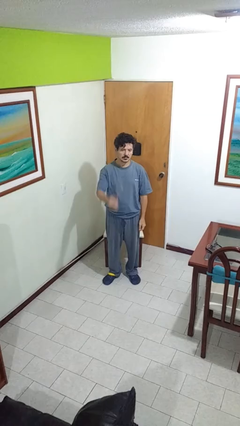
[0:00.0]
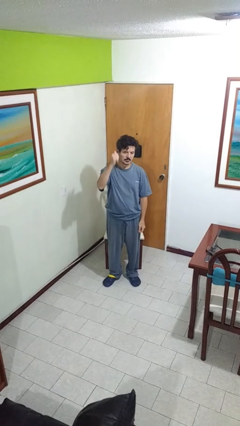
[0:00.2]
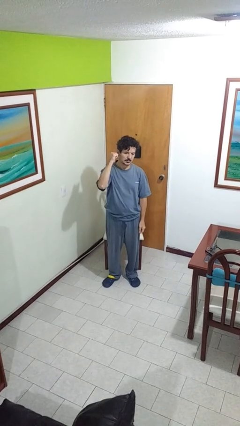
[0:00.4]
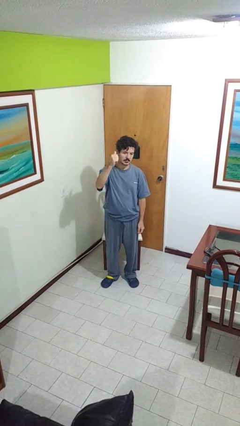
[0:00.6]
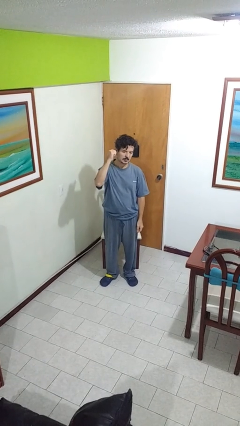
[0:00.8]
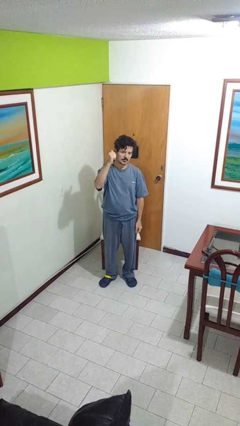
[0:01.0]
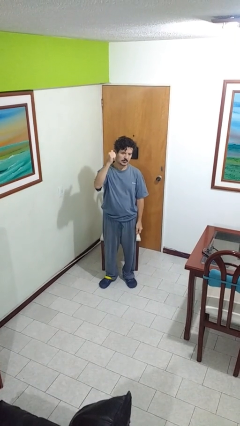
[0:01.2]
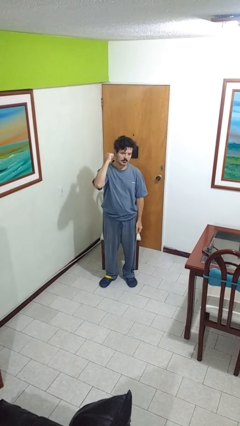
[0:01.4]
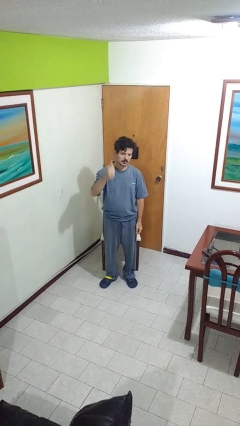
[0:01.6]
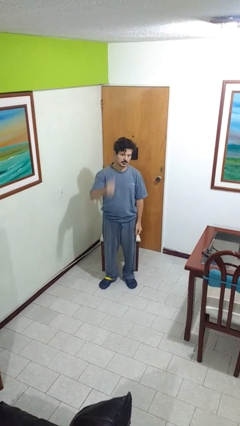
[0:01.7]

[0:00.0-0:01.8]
person gestures behind me

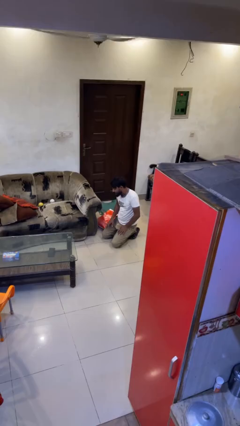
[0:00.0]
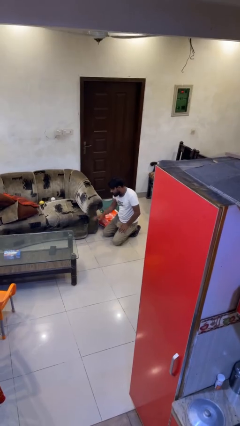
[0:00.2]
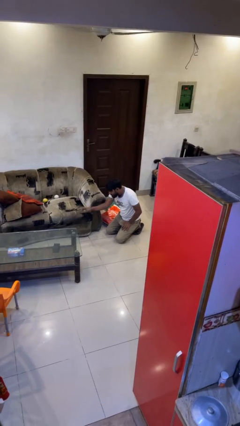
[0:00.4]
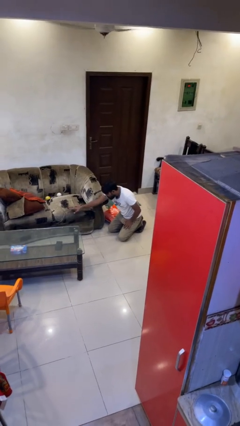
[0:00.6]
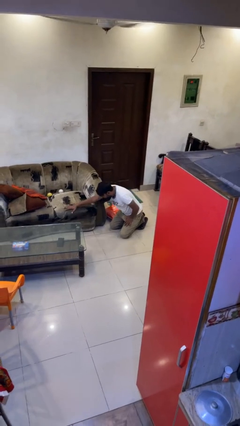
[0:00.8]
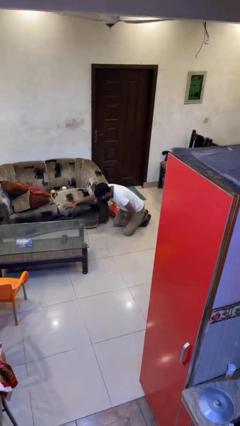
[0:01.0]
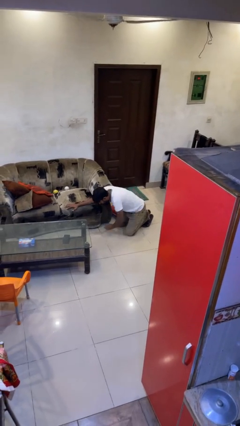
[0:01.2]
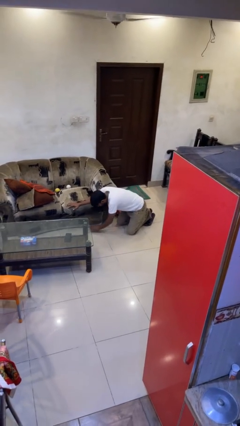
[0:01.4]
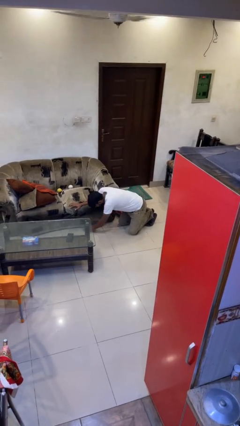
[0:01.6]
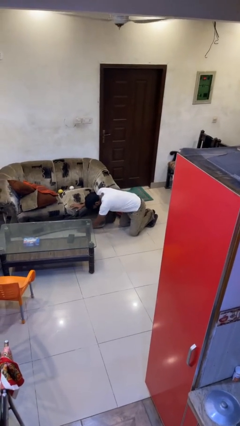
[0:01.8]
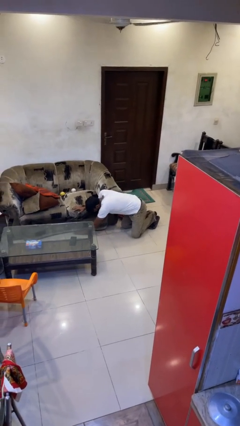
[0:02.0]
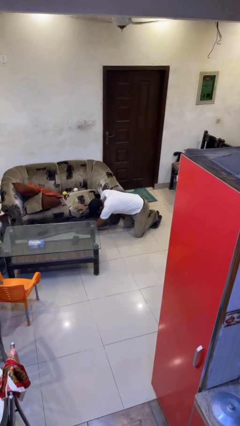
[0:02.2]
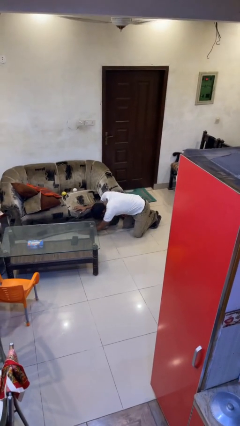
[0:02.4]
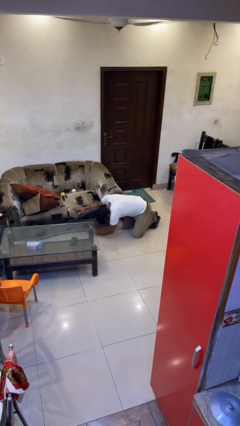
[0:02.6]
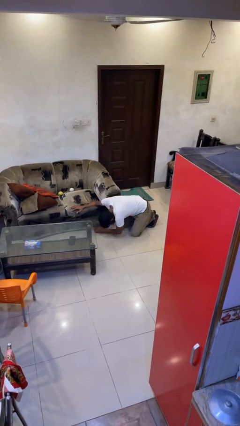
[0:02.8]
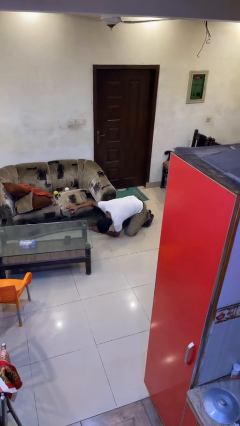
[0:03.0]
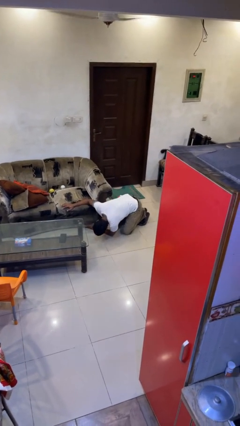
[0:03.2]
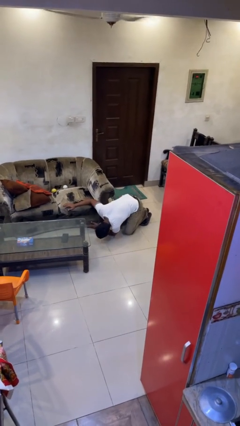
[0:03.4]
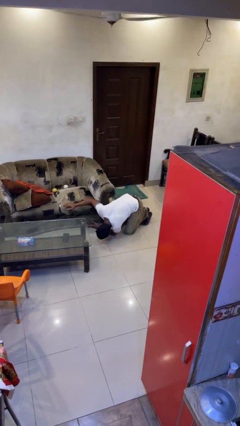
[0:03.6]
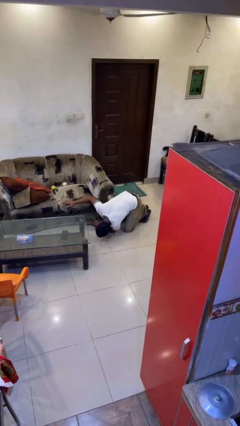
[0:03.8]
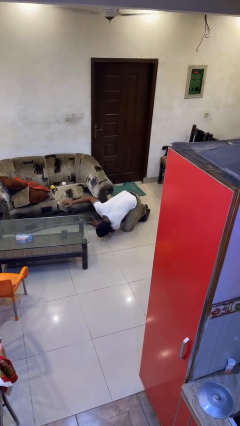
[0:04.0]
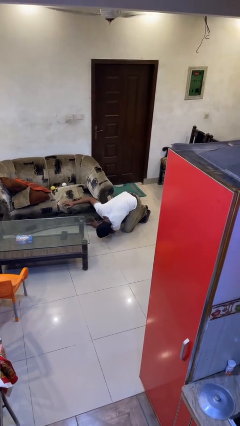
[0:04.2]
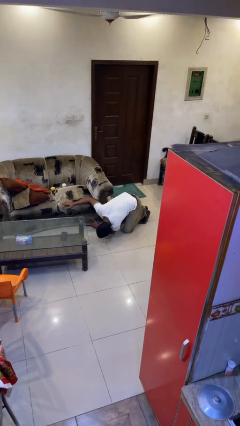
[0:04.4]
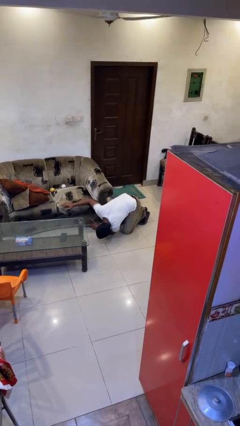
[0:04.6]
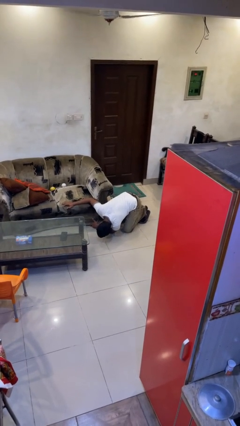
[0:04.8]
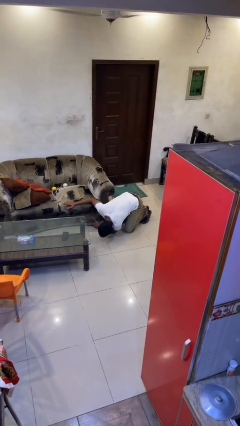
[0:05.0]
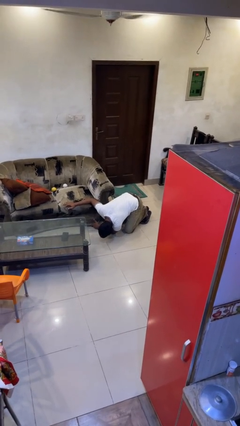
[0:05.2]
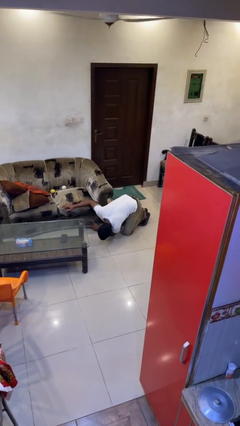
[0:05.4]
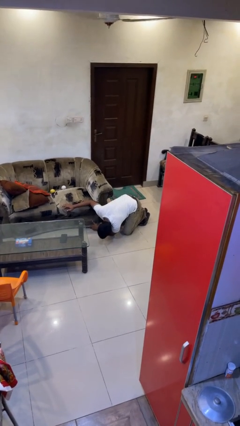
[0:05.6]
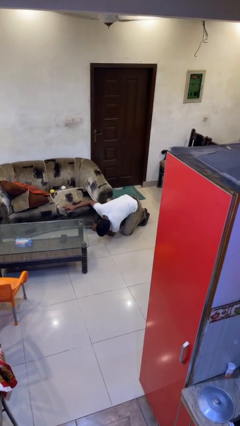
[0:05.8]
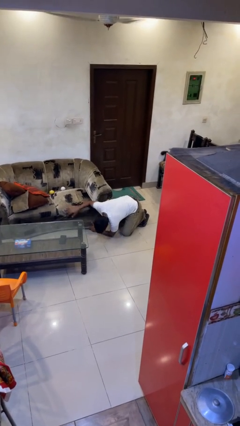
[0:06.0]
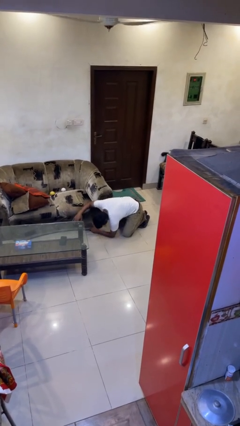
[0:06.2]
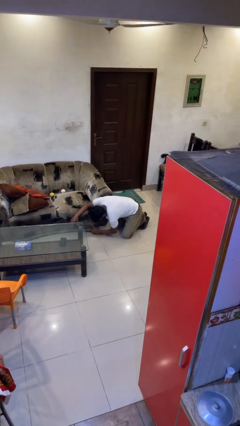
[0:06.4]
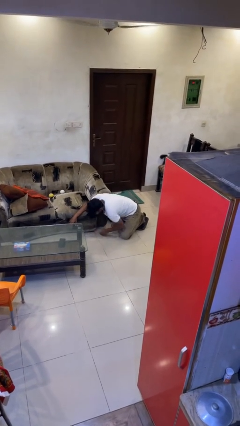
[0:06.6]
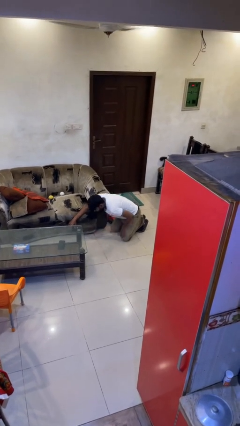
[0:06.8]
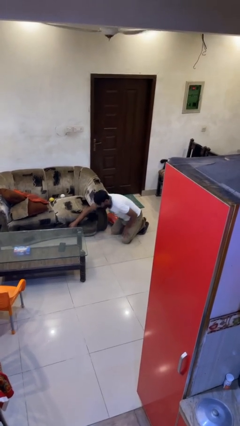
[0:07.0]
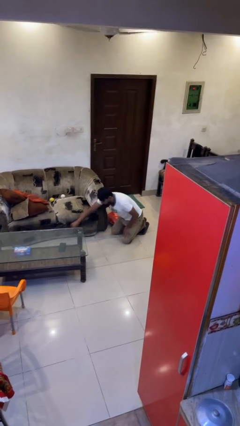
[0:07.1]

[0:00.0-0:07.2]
person searches under couch

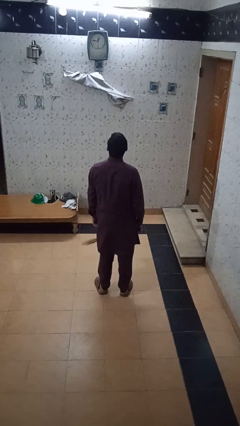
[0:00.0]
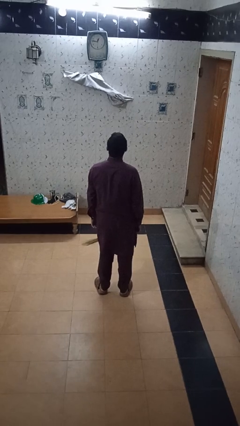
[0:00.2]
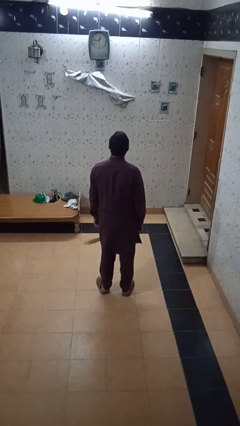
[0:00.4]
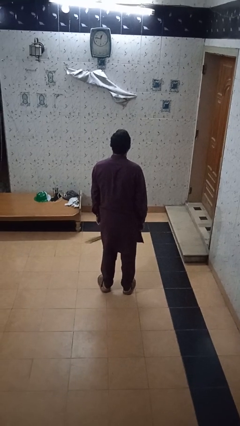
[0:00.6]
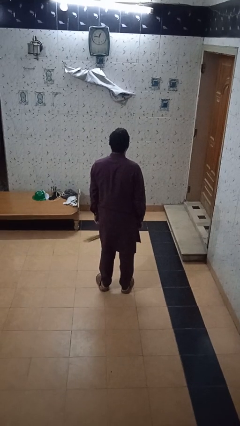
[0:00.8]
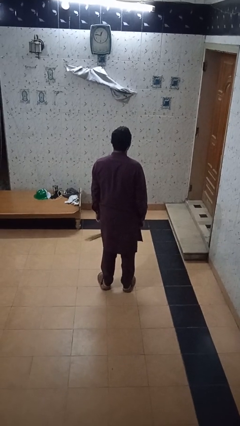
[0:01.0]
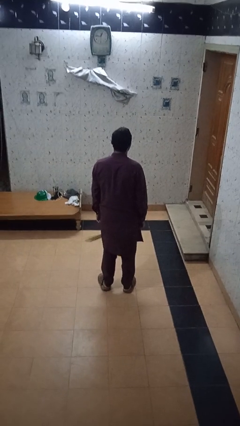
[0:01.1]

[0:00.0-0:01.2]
person puts on glasses

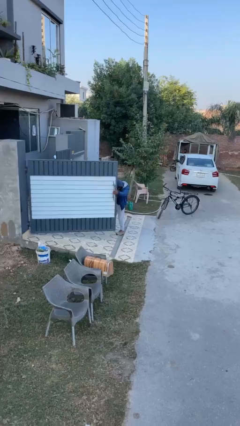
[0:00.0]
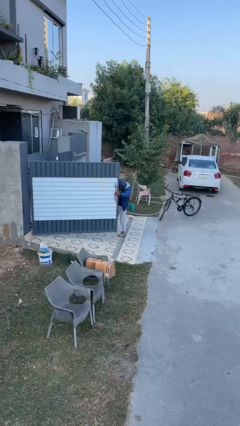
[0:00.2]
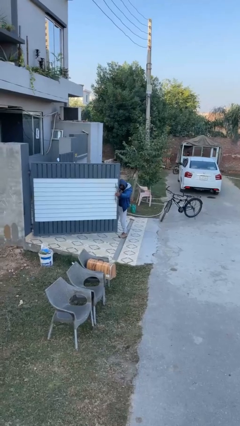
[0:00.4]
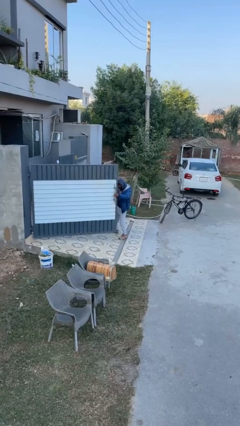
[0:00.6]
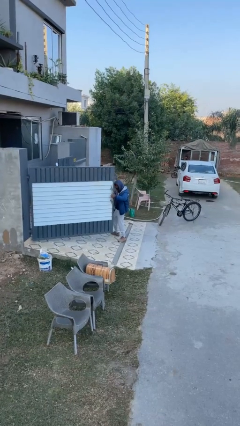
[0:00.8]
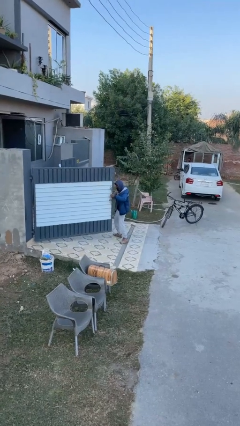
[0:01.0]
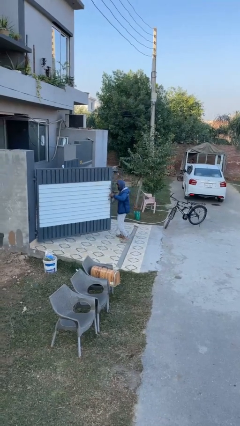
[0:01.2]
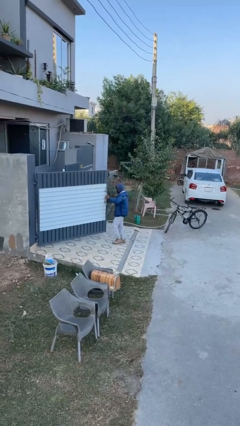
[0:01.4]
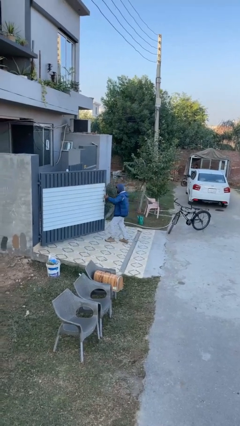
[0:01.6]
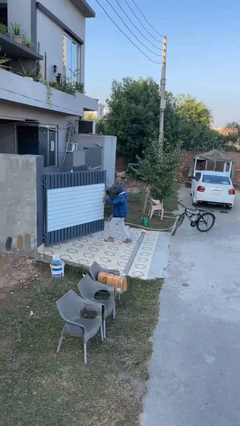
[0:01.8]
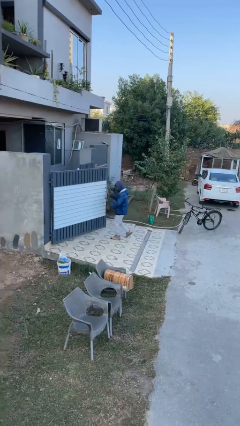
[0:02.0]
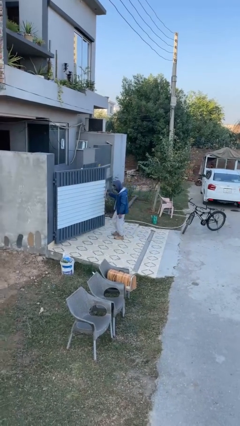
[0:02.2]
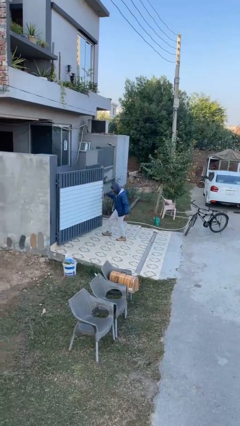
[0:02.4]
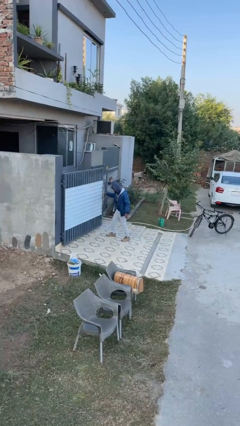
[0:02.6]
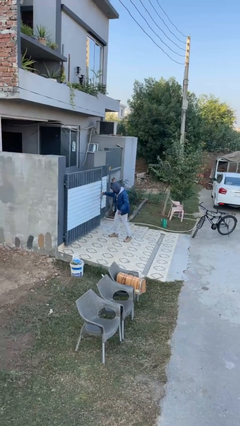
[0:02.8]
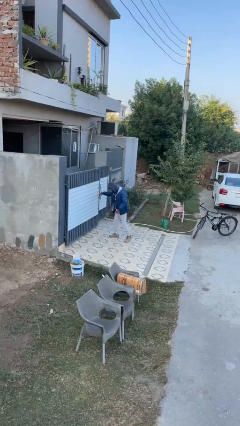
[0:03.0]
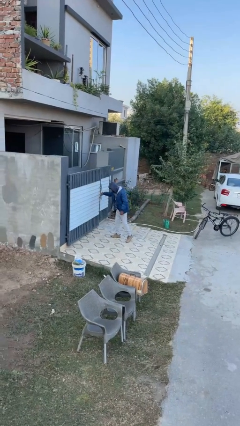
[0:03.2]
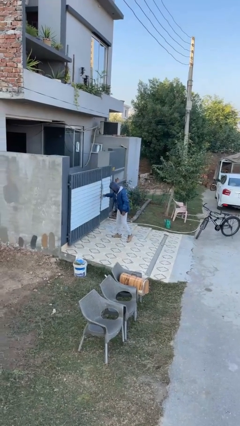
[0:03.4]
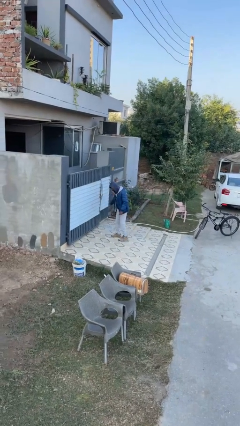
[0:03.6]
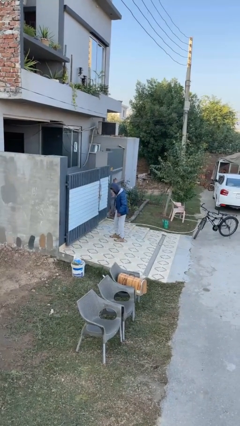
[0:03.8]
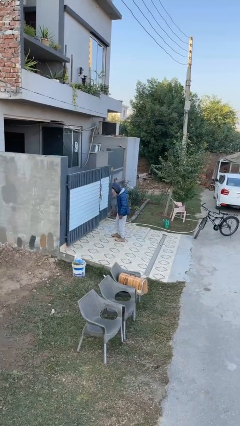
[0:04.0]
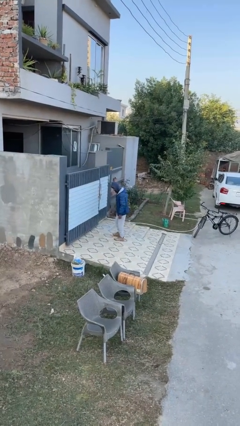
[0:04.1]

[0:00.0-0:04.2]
person closes facility door

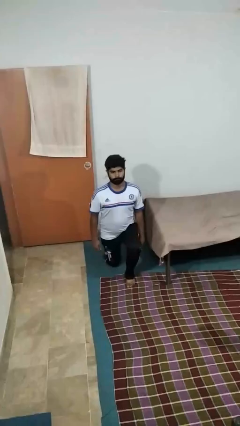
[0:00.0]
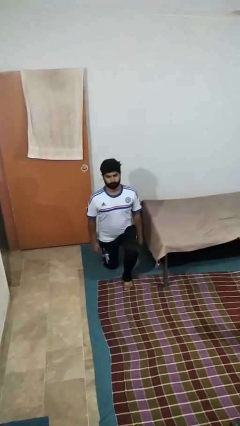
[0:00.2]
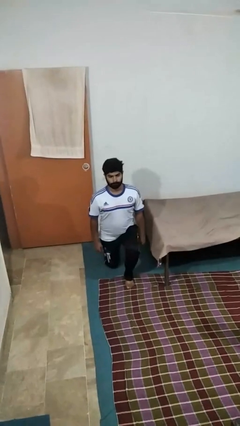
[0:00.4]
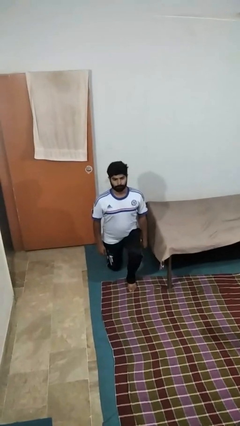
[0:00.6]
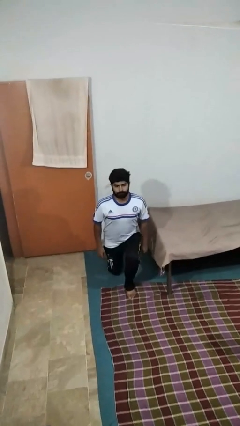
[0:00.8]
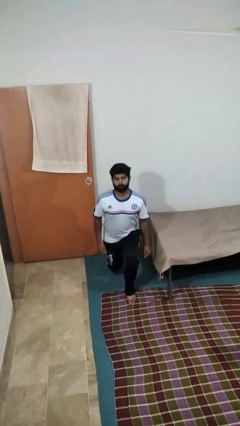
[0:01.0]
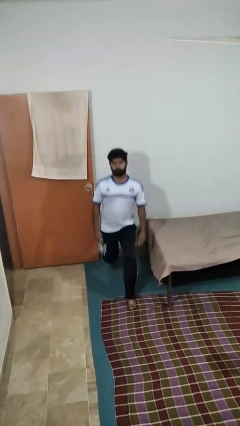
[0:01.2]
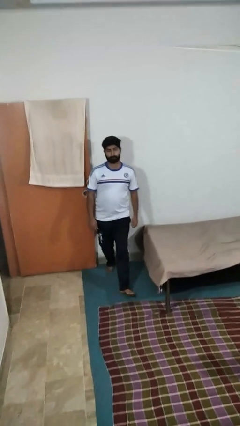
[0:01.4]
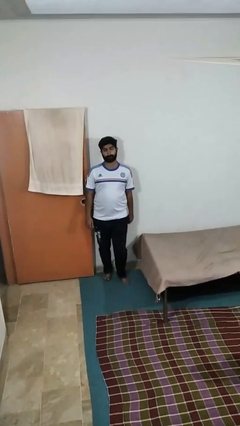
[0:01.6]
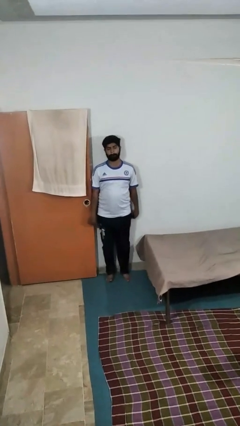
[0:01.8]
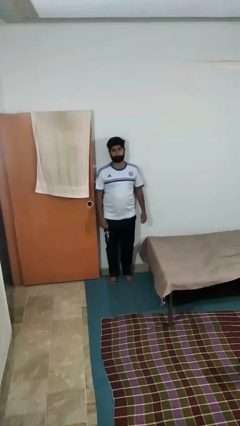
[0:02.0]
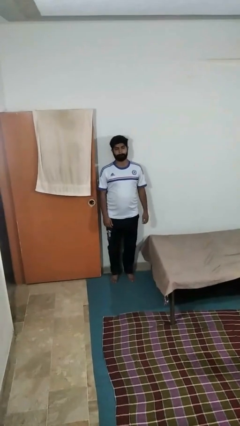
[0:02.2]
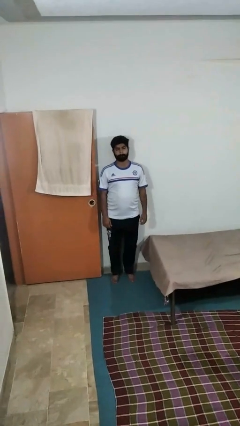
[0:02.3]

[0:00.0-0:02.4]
person stands up from floor

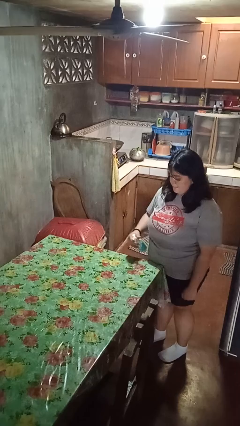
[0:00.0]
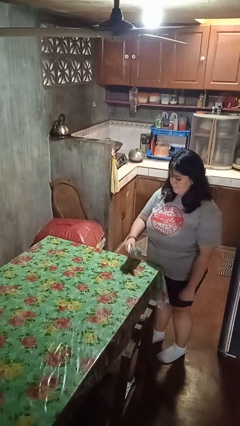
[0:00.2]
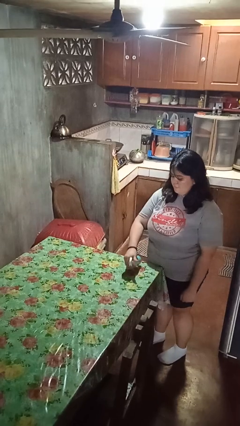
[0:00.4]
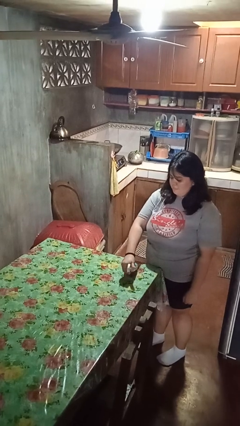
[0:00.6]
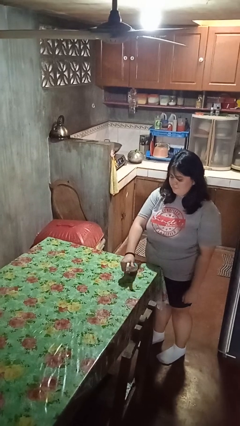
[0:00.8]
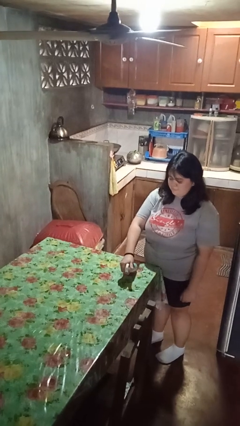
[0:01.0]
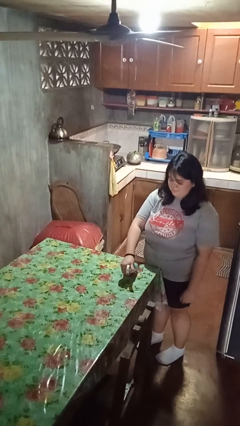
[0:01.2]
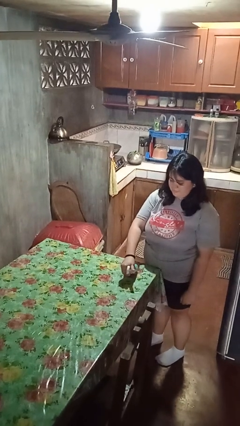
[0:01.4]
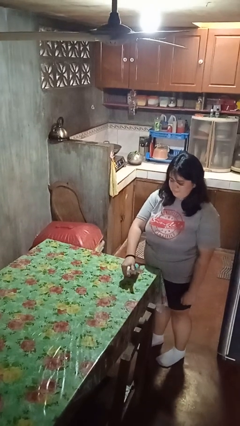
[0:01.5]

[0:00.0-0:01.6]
person sprays from bottle
